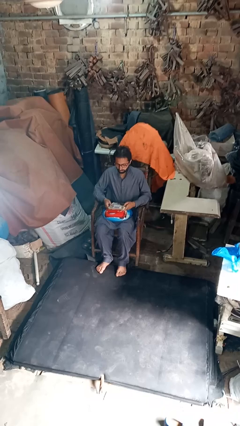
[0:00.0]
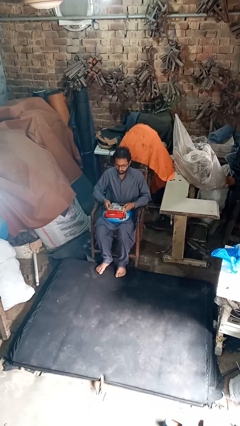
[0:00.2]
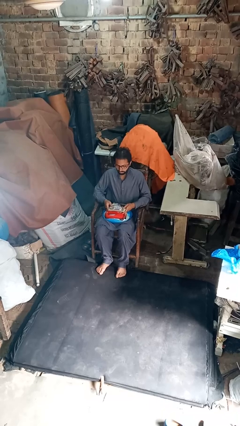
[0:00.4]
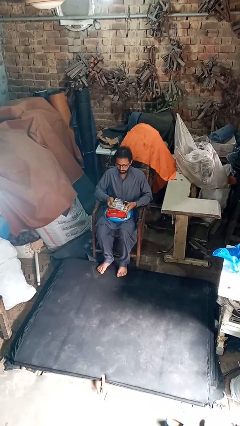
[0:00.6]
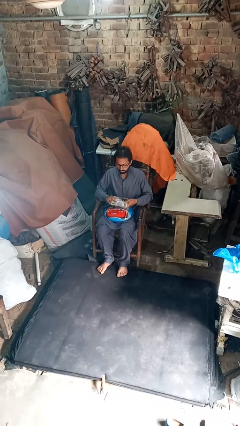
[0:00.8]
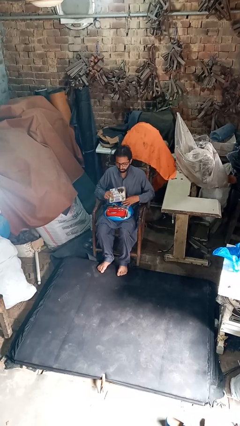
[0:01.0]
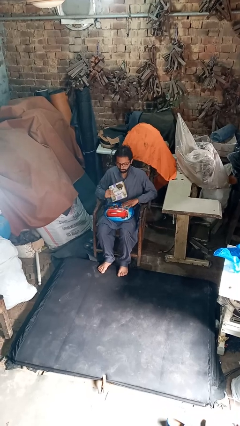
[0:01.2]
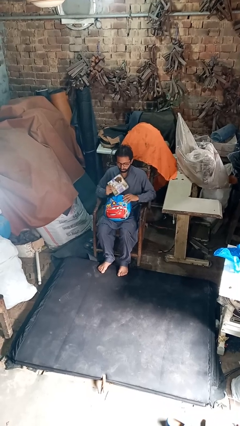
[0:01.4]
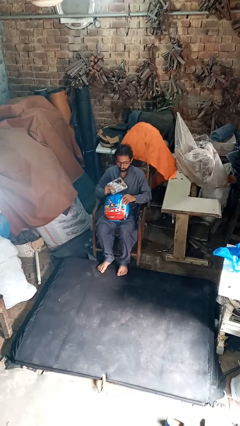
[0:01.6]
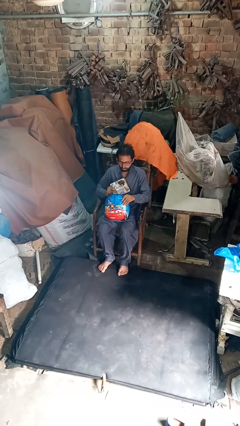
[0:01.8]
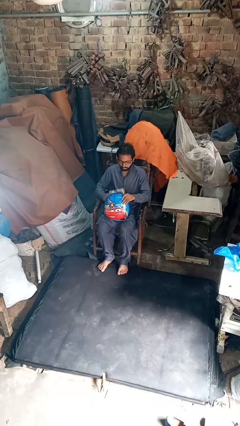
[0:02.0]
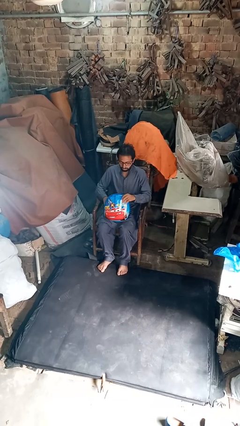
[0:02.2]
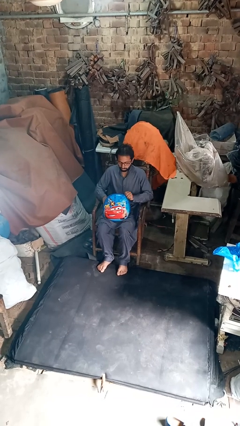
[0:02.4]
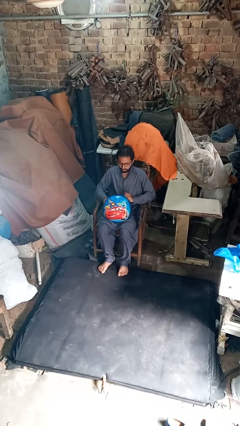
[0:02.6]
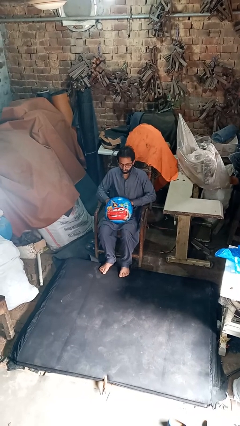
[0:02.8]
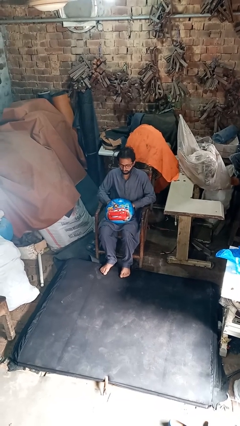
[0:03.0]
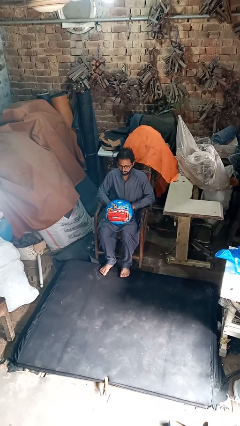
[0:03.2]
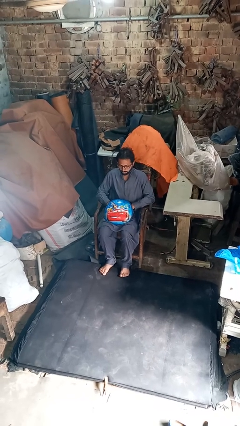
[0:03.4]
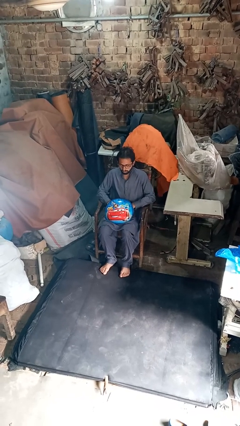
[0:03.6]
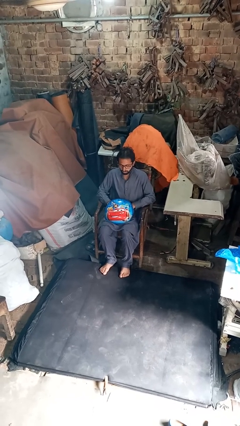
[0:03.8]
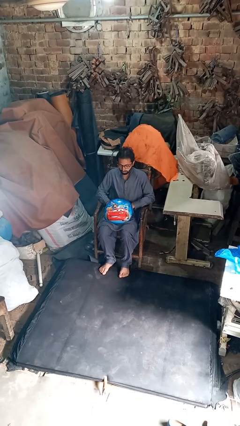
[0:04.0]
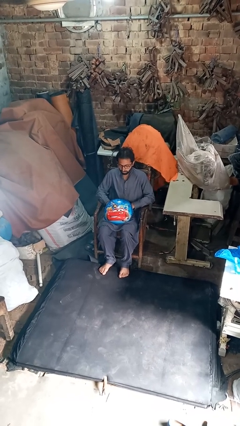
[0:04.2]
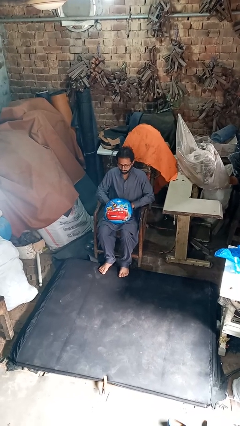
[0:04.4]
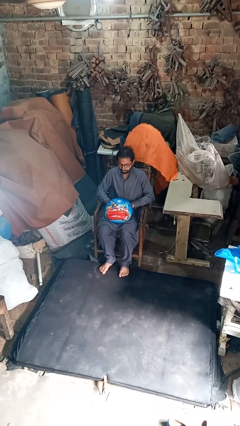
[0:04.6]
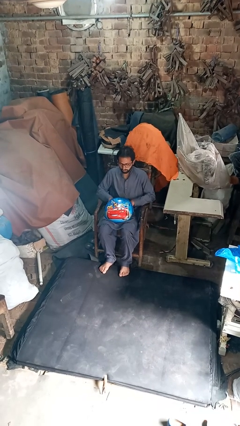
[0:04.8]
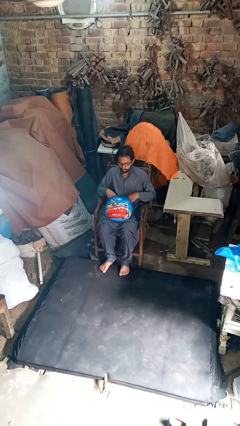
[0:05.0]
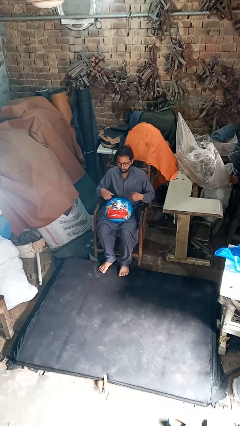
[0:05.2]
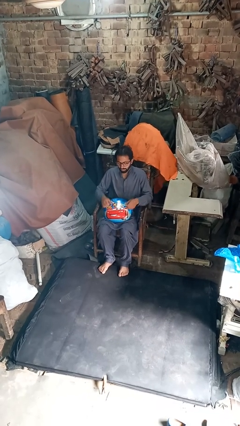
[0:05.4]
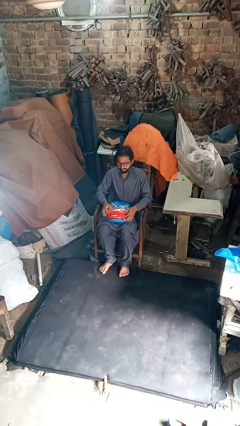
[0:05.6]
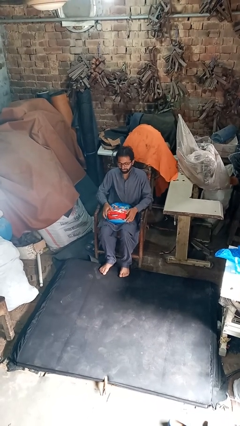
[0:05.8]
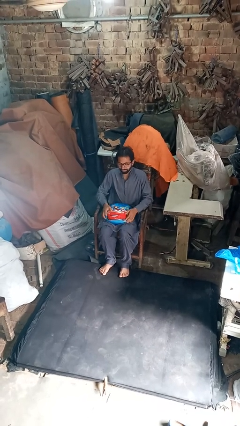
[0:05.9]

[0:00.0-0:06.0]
person puts object into purse

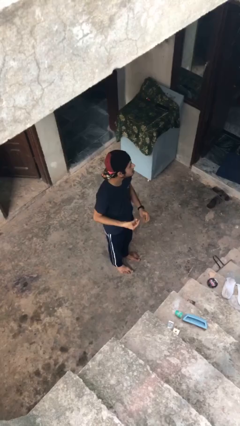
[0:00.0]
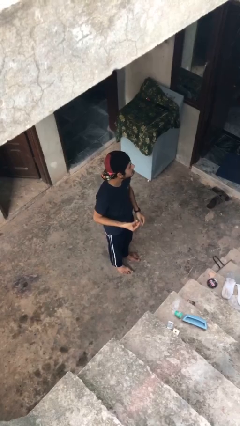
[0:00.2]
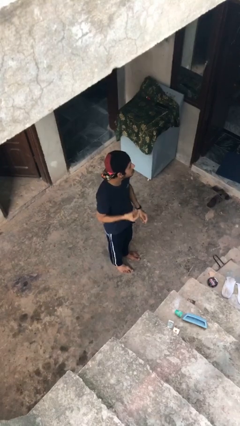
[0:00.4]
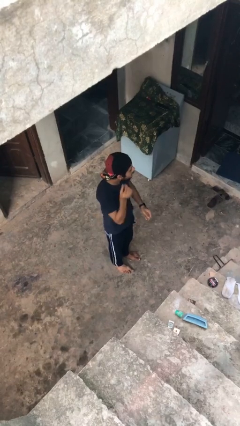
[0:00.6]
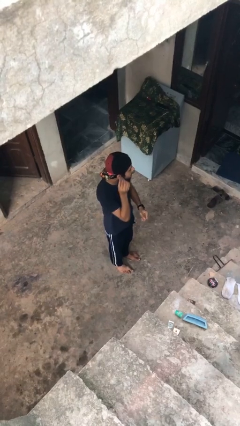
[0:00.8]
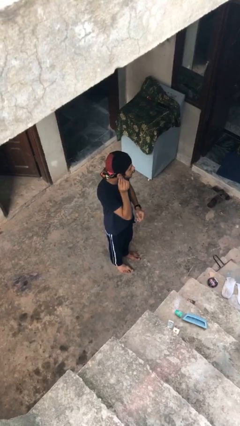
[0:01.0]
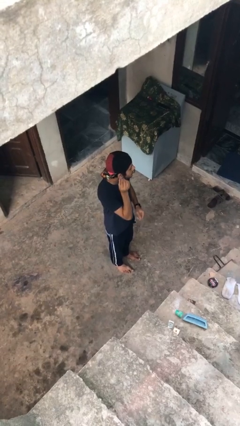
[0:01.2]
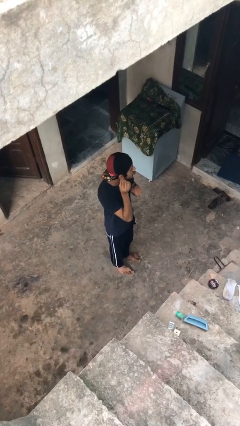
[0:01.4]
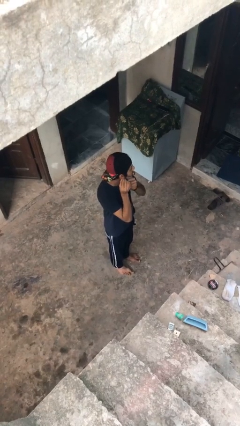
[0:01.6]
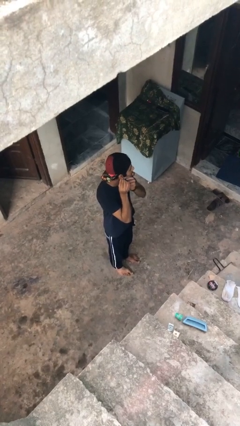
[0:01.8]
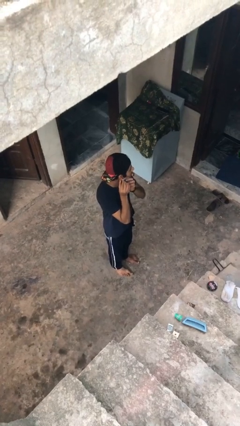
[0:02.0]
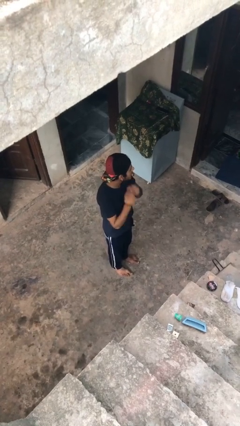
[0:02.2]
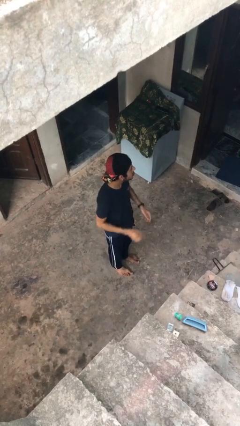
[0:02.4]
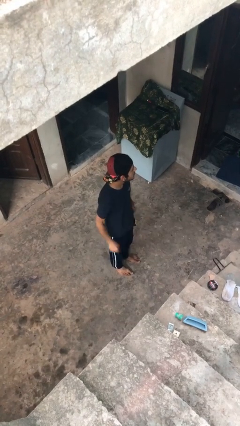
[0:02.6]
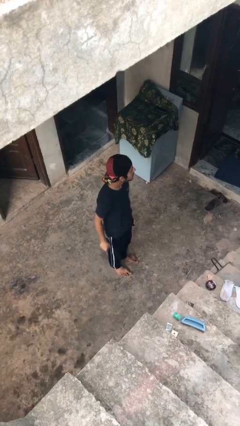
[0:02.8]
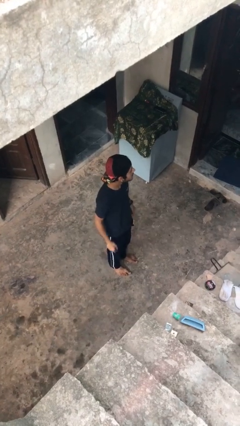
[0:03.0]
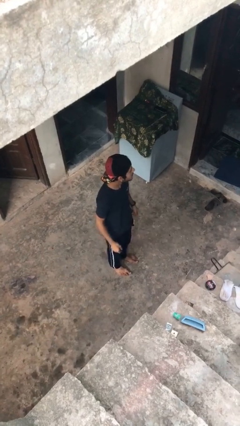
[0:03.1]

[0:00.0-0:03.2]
person puts on earrings

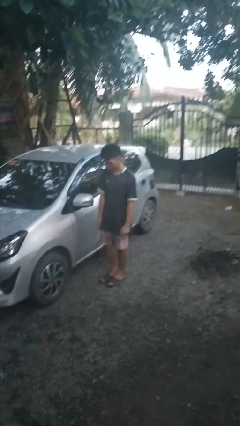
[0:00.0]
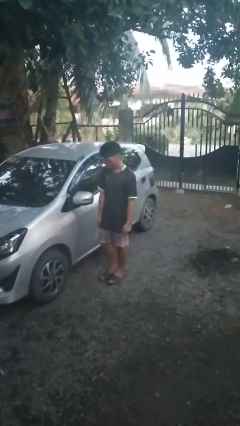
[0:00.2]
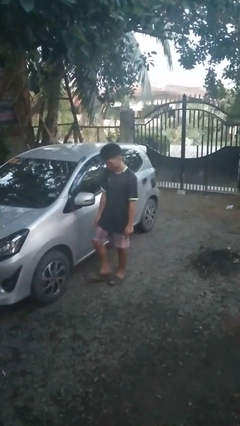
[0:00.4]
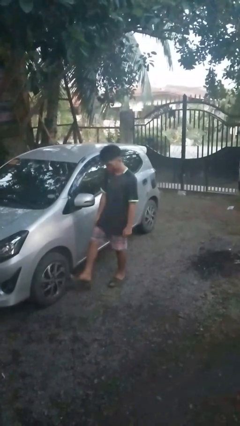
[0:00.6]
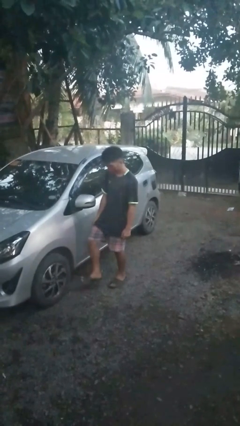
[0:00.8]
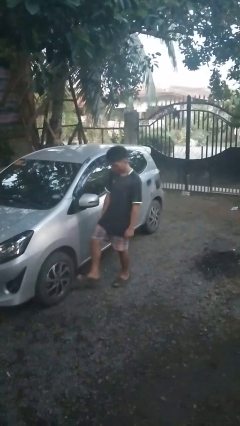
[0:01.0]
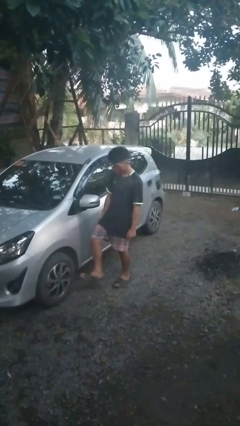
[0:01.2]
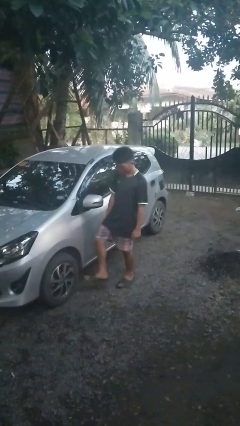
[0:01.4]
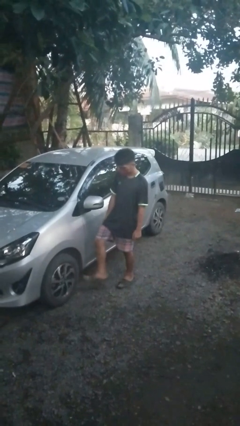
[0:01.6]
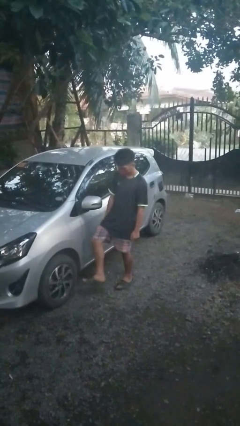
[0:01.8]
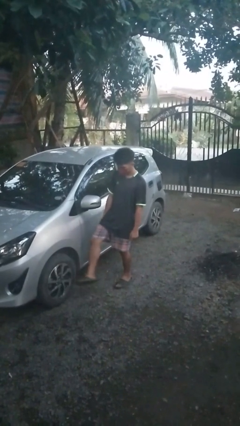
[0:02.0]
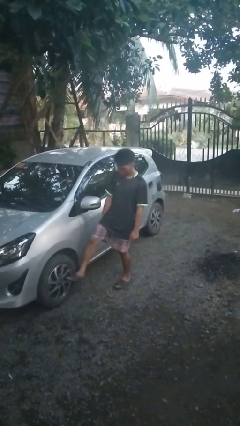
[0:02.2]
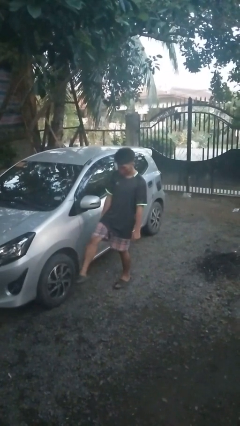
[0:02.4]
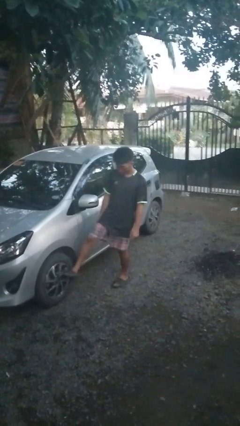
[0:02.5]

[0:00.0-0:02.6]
person kicks car tires

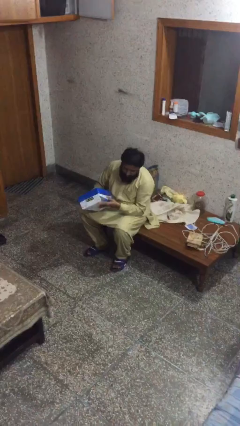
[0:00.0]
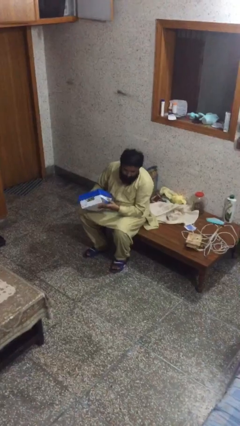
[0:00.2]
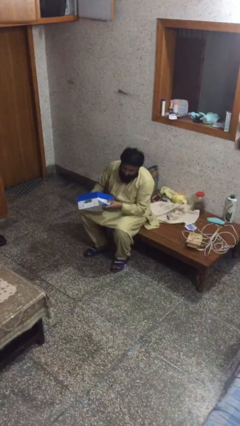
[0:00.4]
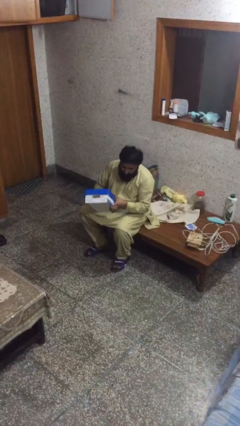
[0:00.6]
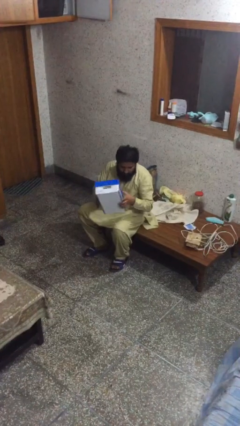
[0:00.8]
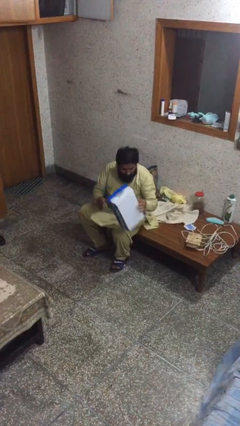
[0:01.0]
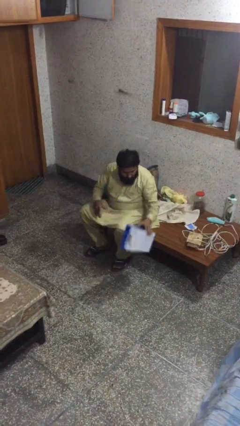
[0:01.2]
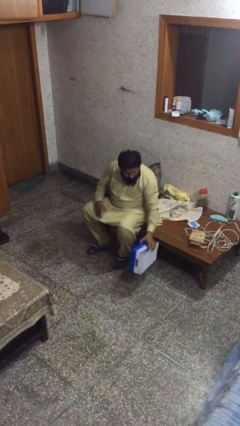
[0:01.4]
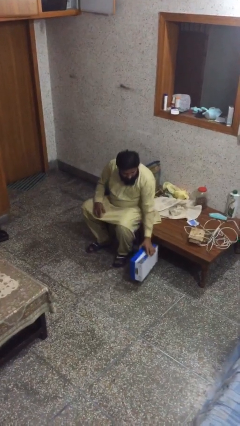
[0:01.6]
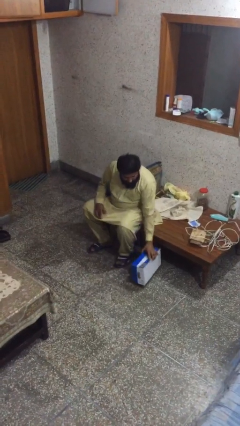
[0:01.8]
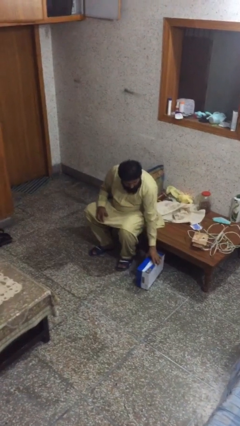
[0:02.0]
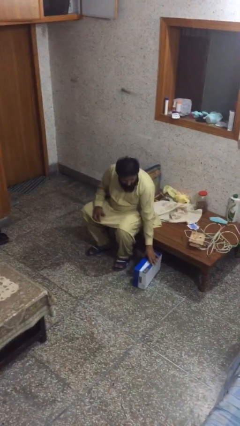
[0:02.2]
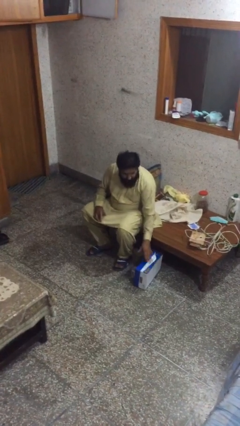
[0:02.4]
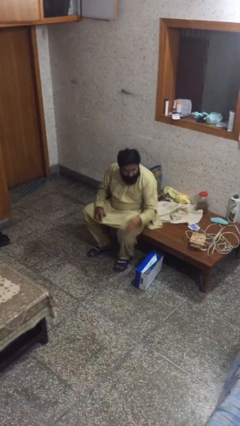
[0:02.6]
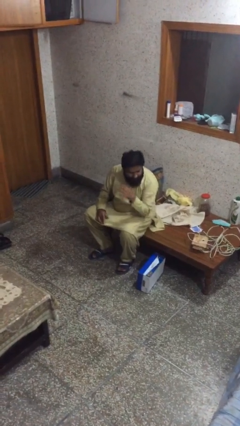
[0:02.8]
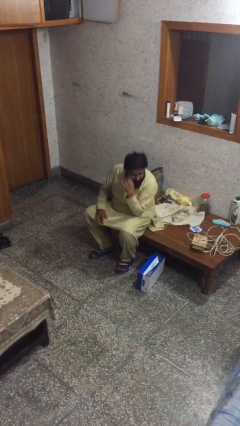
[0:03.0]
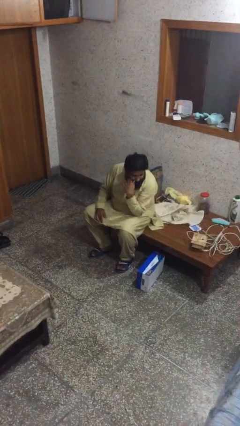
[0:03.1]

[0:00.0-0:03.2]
person puts down object on floor

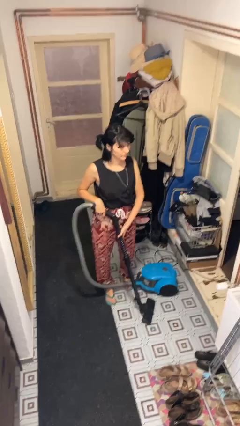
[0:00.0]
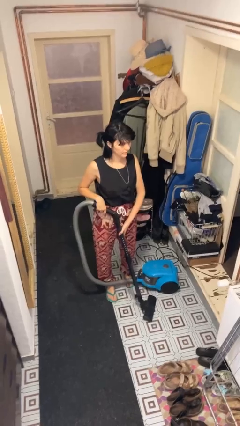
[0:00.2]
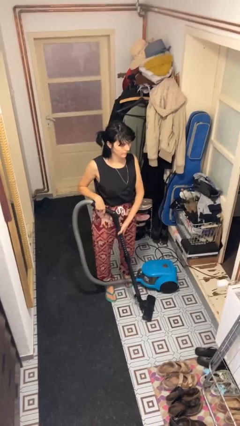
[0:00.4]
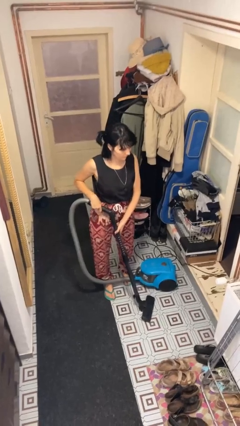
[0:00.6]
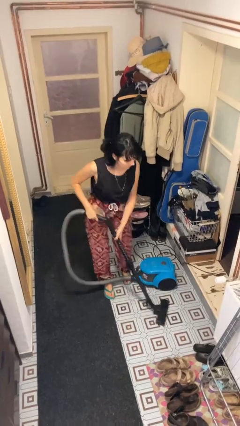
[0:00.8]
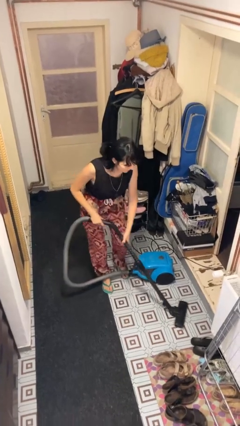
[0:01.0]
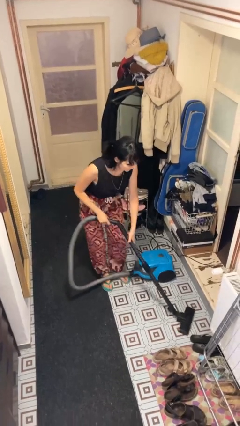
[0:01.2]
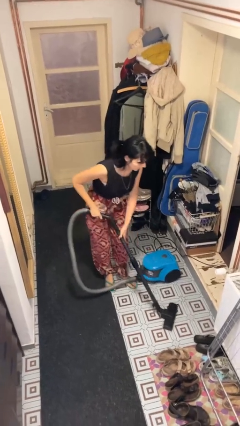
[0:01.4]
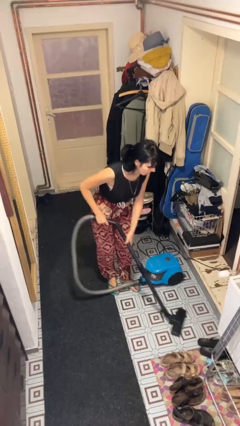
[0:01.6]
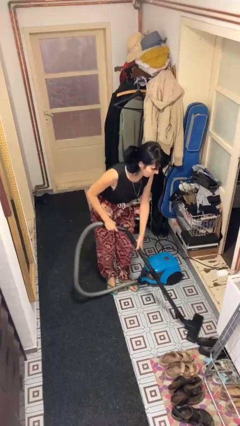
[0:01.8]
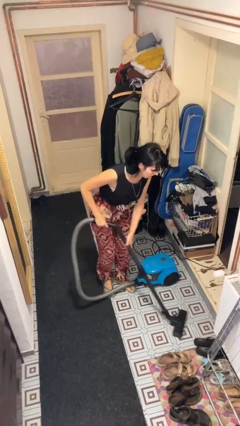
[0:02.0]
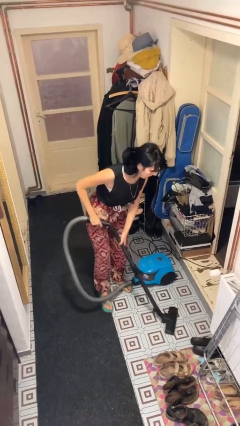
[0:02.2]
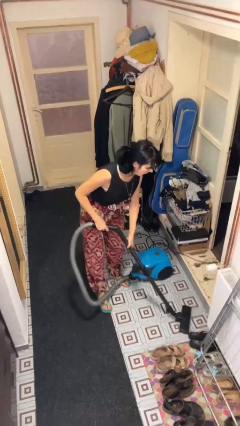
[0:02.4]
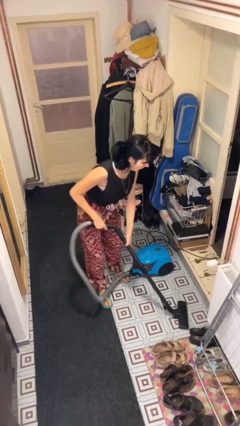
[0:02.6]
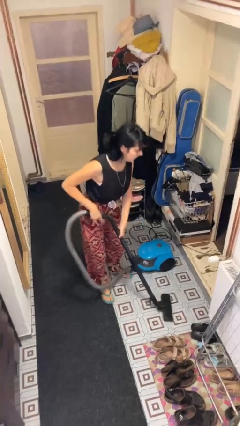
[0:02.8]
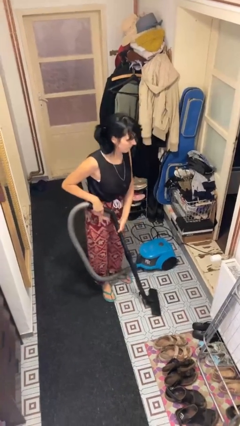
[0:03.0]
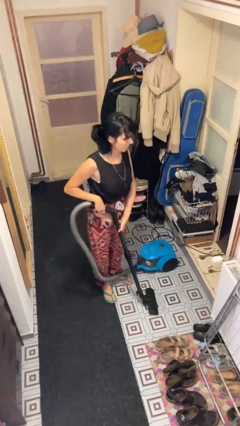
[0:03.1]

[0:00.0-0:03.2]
person vacuums carpet
